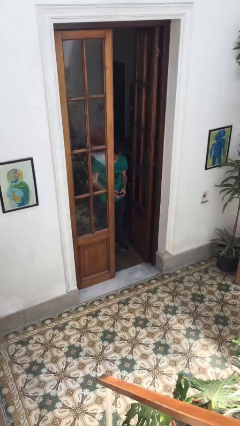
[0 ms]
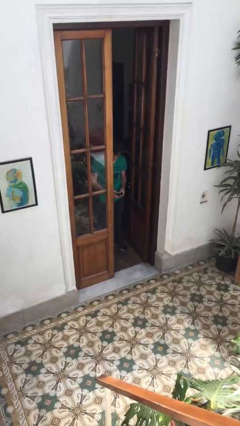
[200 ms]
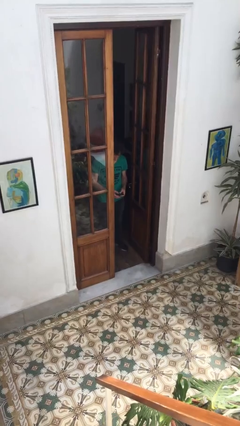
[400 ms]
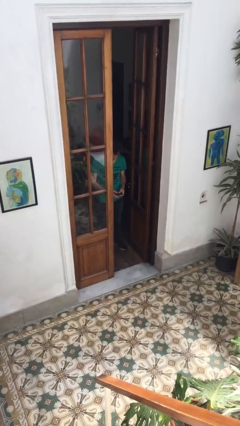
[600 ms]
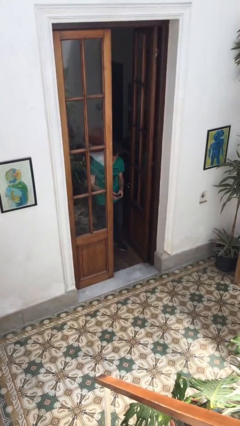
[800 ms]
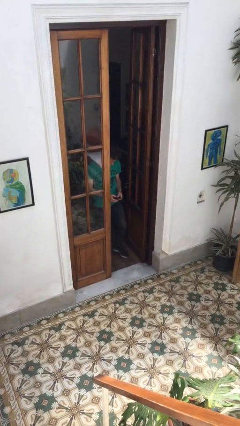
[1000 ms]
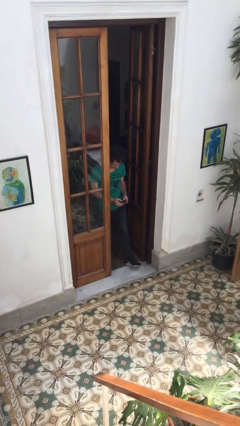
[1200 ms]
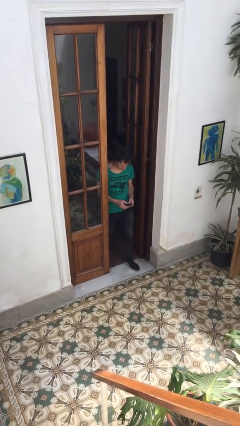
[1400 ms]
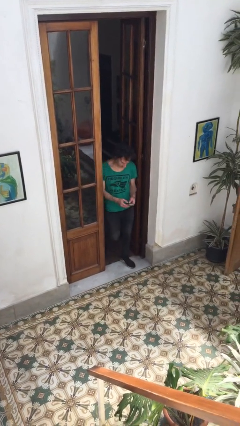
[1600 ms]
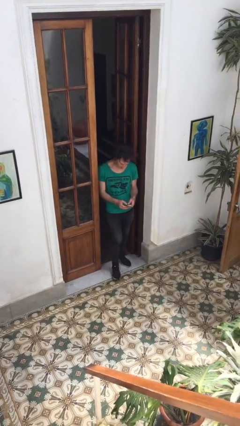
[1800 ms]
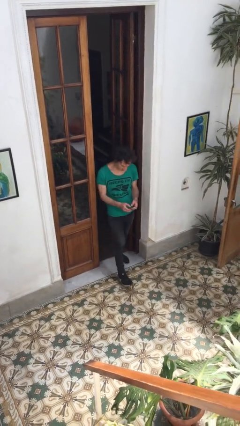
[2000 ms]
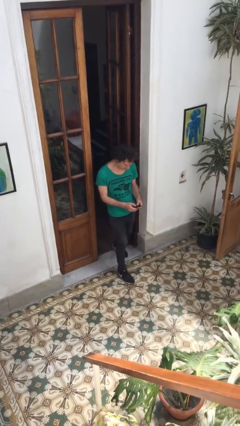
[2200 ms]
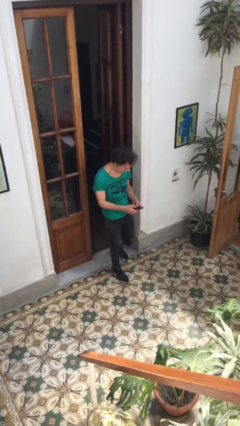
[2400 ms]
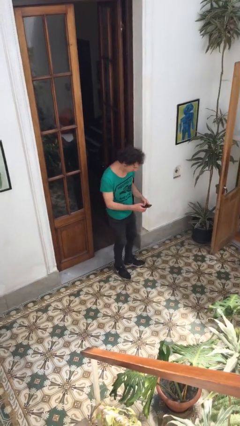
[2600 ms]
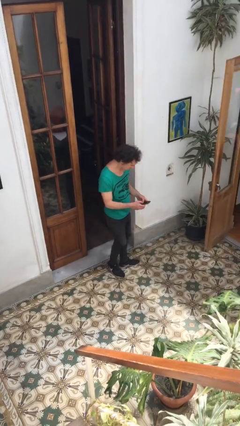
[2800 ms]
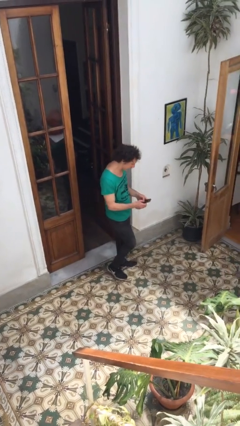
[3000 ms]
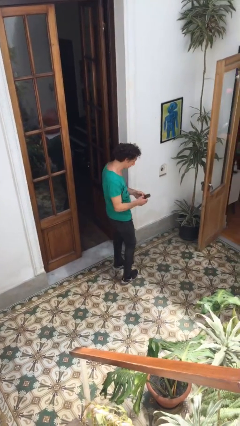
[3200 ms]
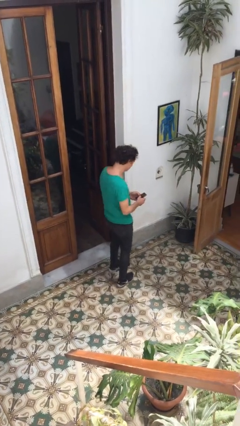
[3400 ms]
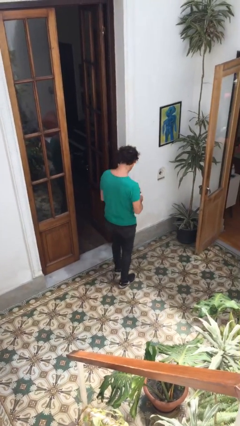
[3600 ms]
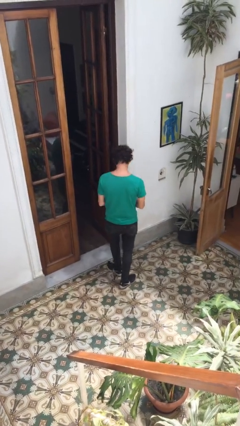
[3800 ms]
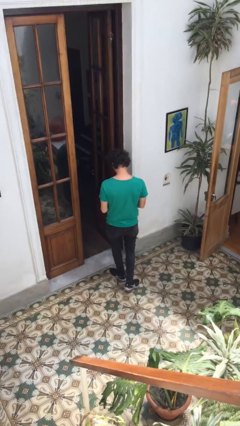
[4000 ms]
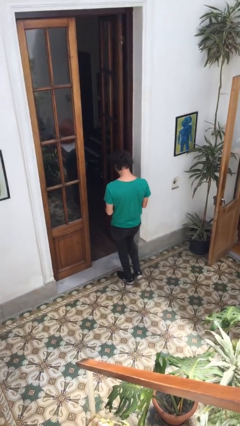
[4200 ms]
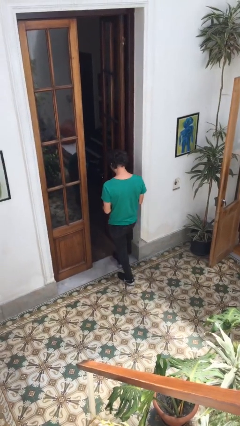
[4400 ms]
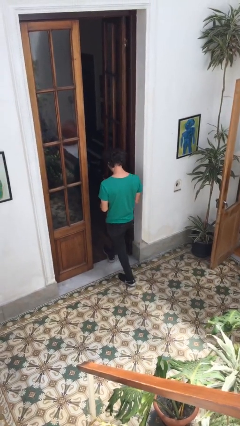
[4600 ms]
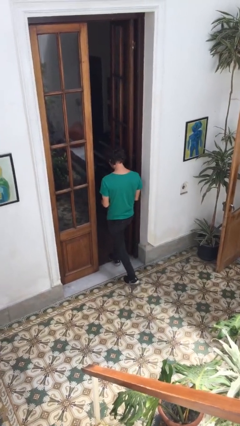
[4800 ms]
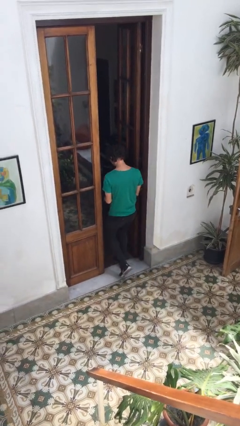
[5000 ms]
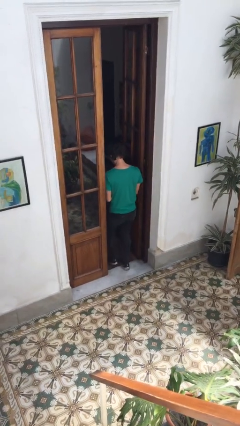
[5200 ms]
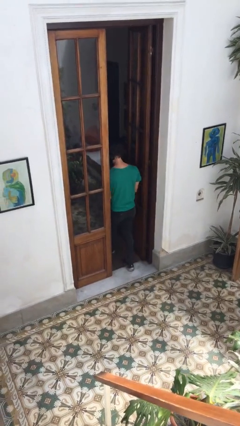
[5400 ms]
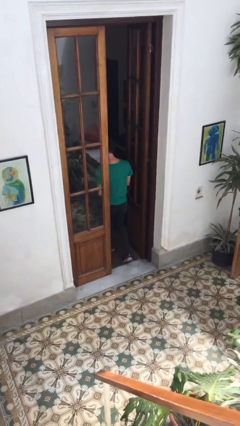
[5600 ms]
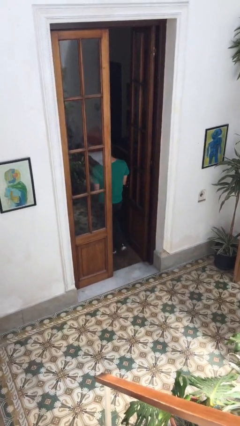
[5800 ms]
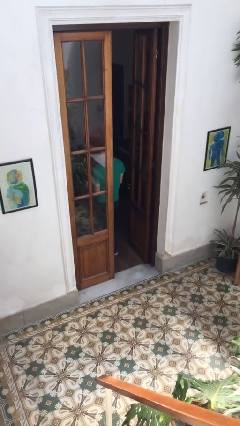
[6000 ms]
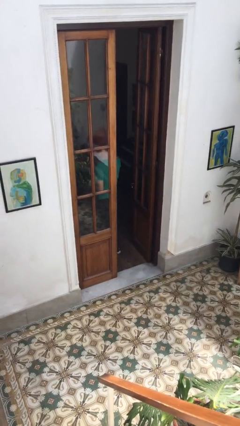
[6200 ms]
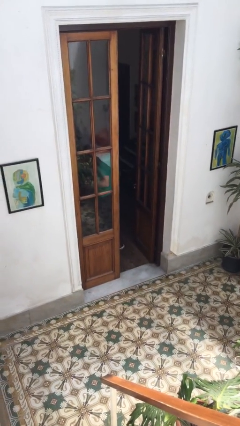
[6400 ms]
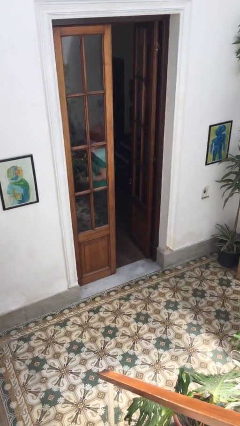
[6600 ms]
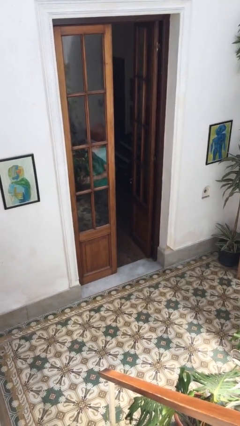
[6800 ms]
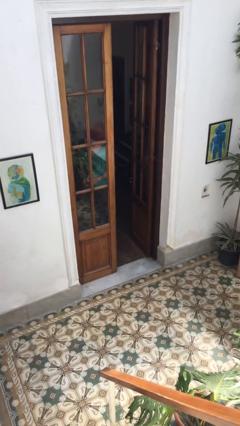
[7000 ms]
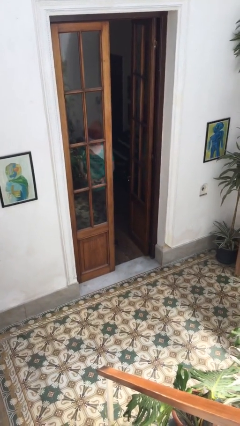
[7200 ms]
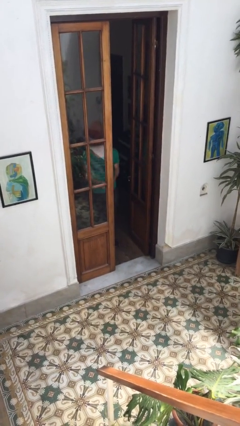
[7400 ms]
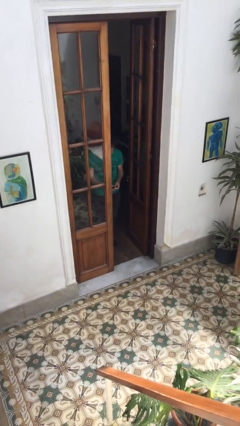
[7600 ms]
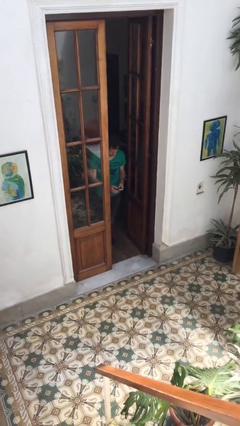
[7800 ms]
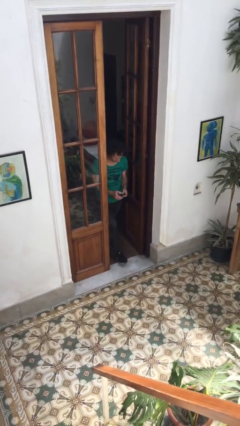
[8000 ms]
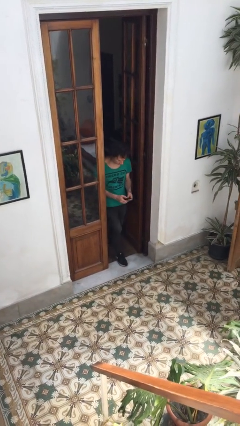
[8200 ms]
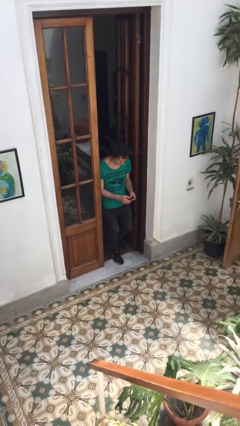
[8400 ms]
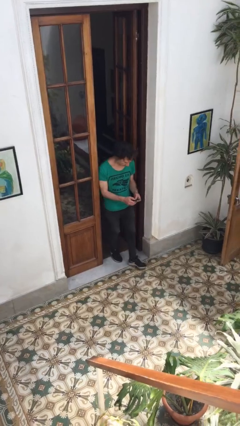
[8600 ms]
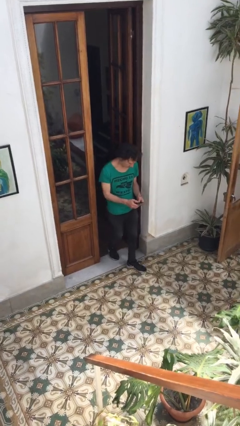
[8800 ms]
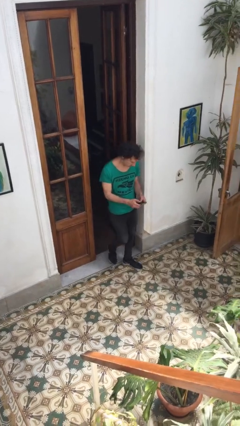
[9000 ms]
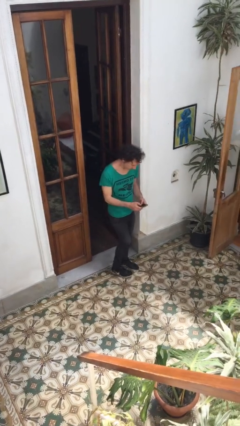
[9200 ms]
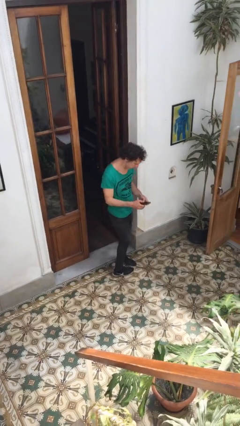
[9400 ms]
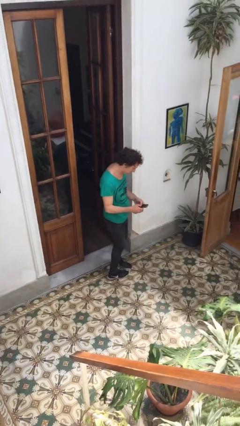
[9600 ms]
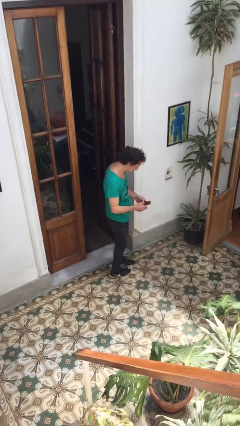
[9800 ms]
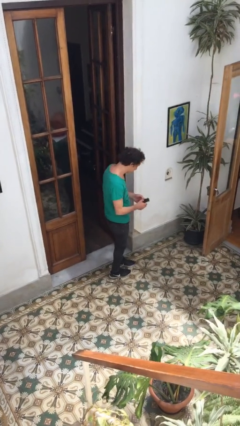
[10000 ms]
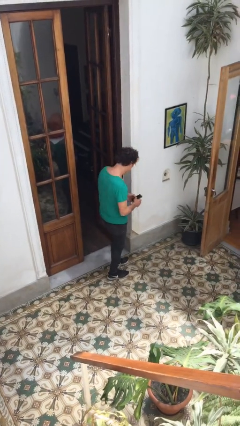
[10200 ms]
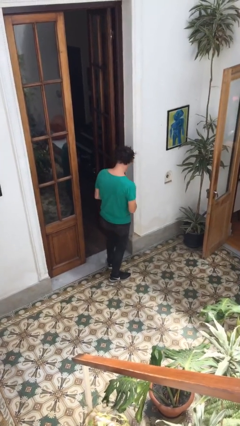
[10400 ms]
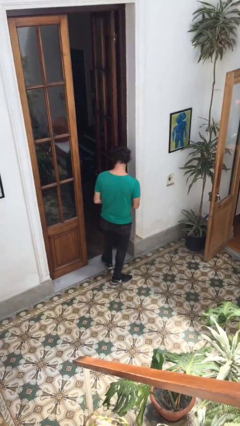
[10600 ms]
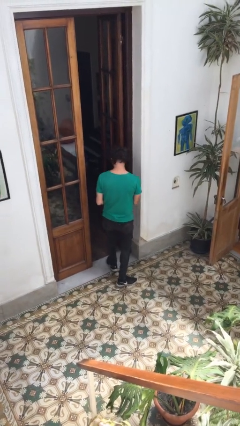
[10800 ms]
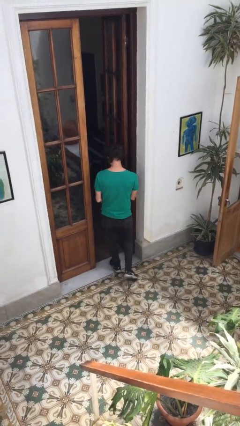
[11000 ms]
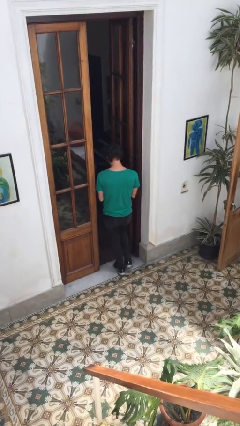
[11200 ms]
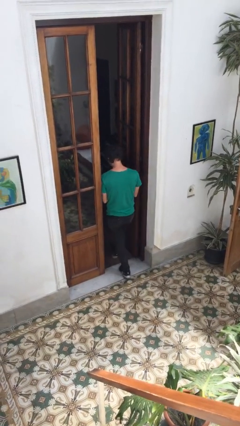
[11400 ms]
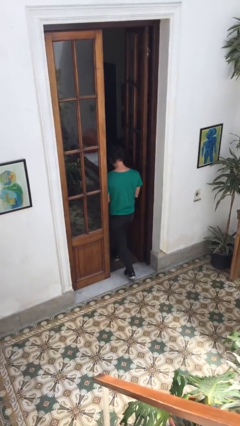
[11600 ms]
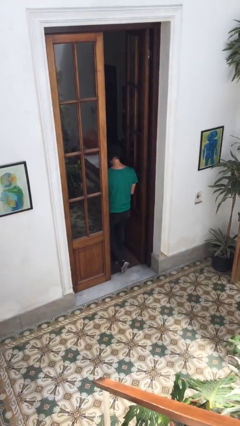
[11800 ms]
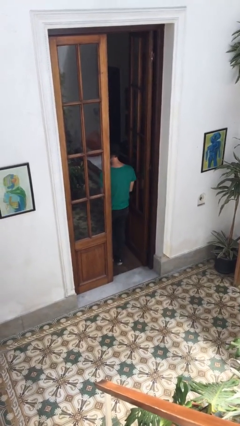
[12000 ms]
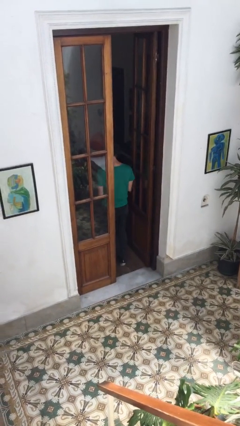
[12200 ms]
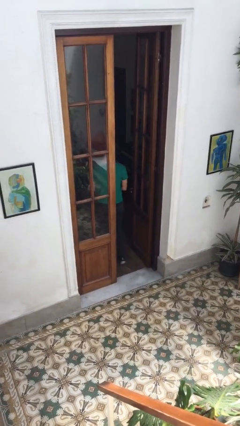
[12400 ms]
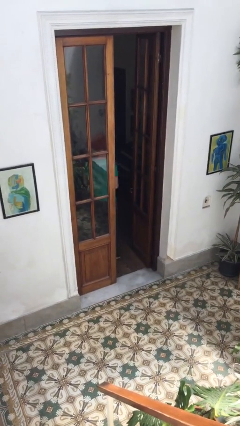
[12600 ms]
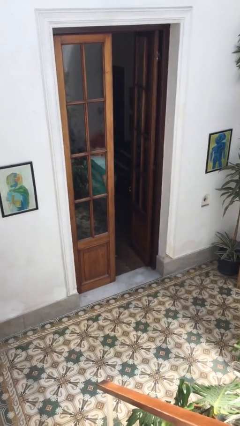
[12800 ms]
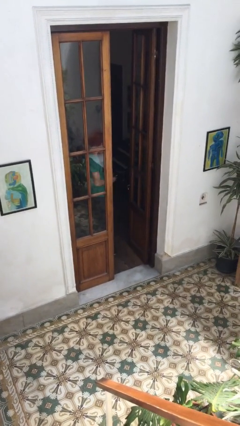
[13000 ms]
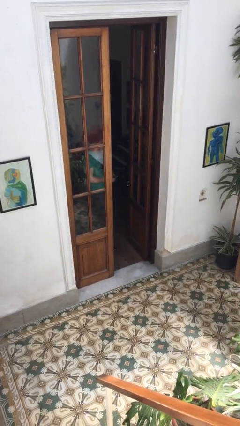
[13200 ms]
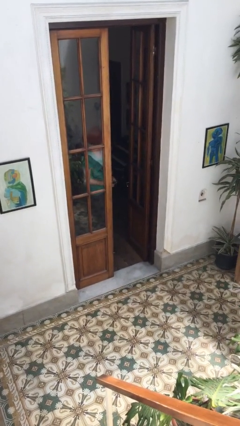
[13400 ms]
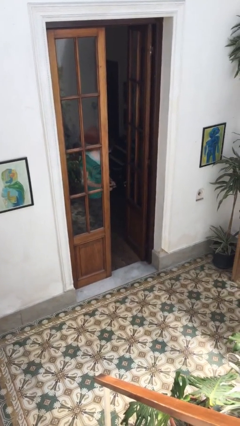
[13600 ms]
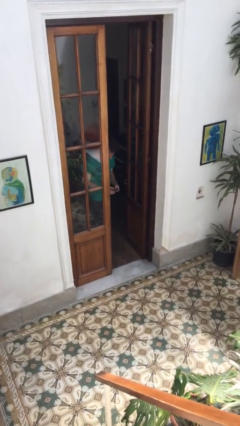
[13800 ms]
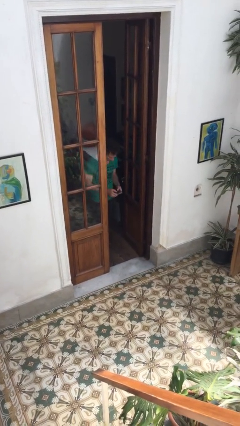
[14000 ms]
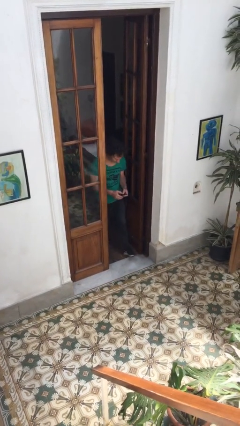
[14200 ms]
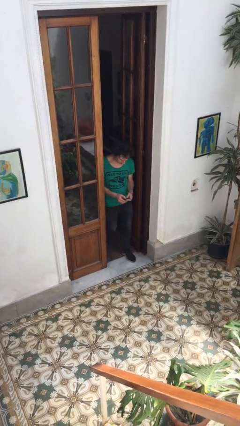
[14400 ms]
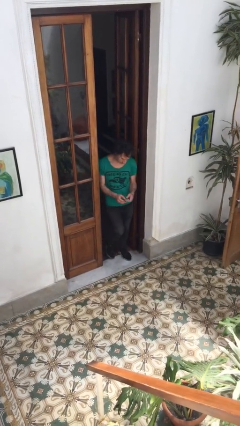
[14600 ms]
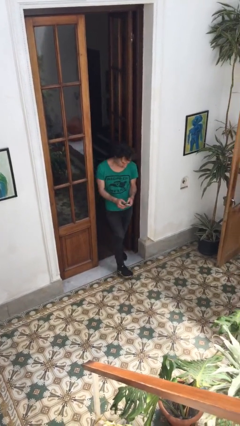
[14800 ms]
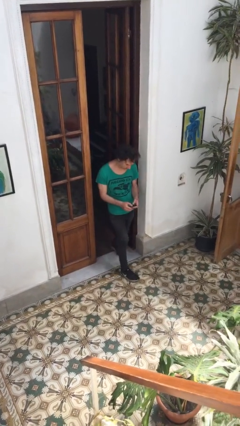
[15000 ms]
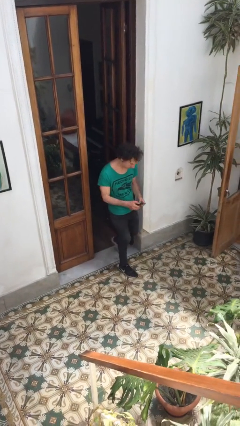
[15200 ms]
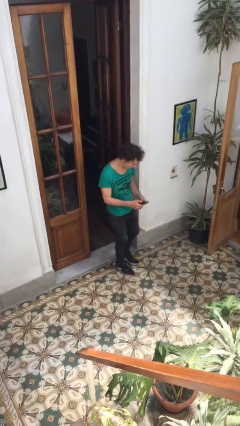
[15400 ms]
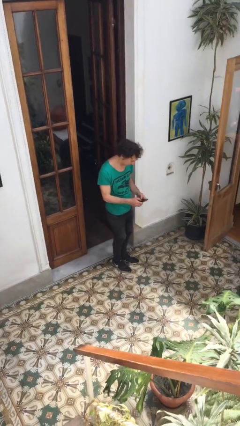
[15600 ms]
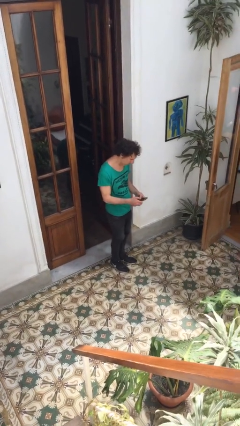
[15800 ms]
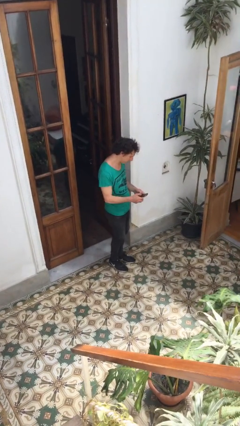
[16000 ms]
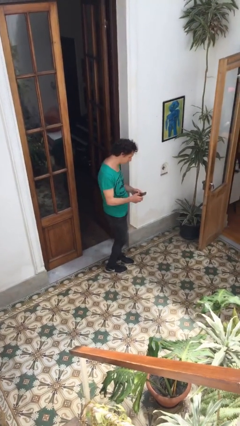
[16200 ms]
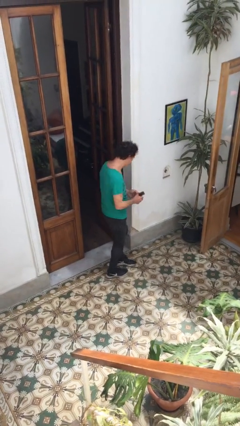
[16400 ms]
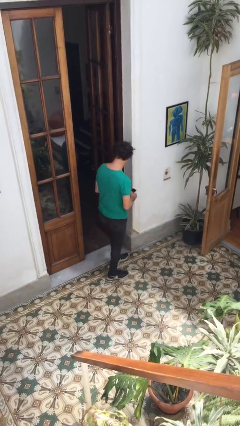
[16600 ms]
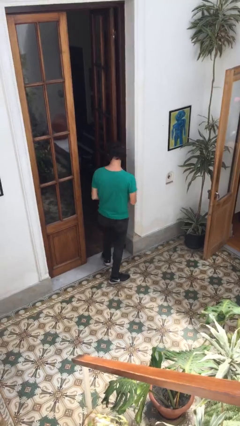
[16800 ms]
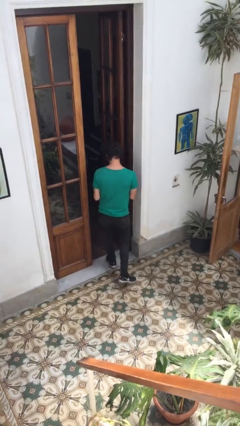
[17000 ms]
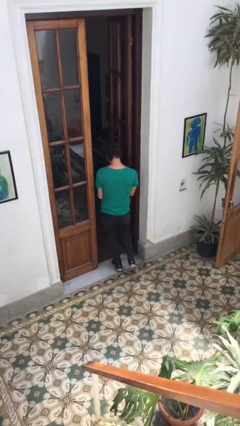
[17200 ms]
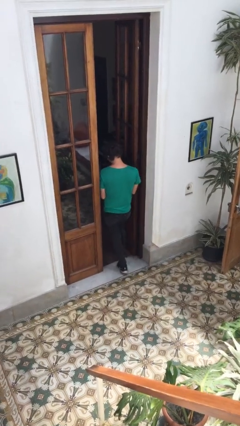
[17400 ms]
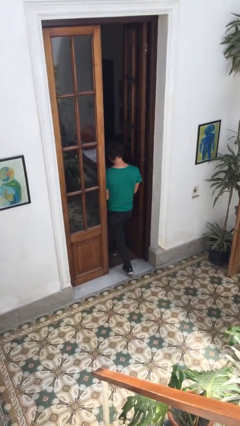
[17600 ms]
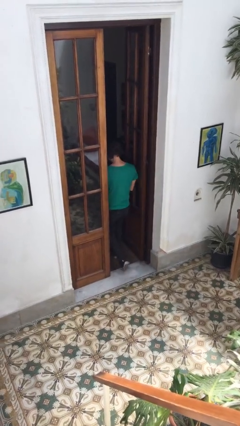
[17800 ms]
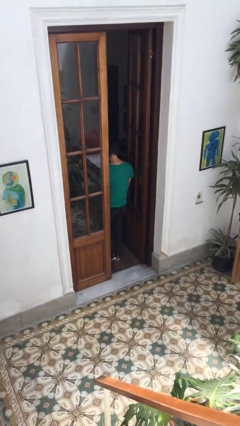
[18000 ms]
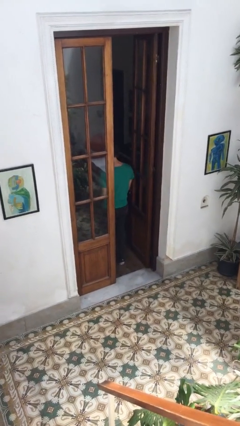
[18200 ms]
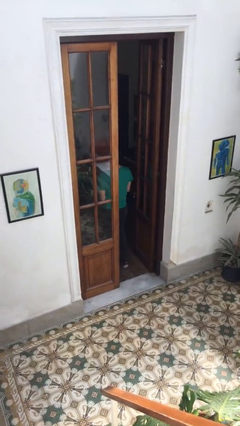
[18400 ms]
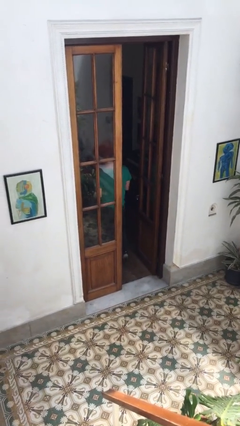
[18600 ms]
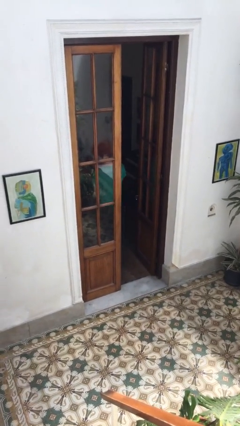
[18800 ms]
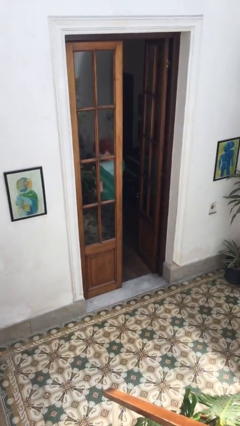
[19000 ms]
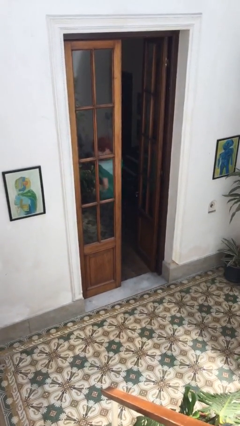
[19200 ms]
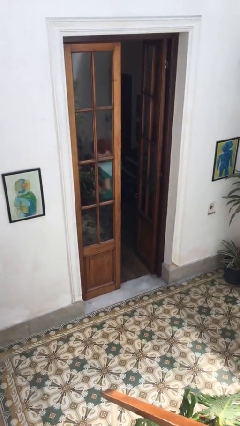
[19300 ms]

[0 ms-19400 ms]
person texts on phone
